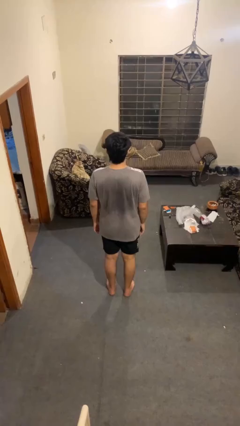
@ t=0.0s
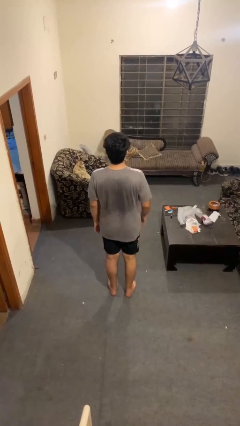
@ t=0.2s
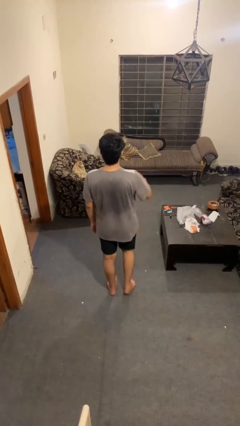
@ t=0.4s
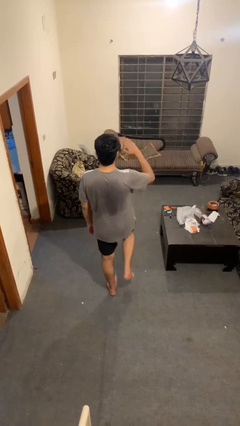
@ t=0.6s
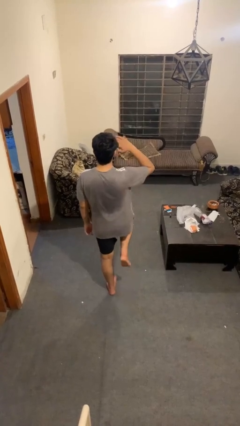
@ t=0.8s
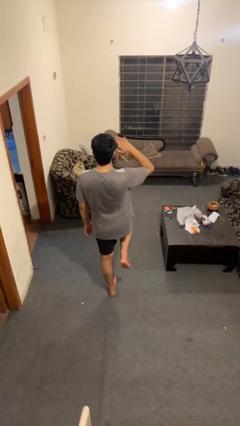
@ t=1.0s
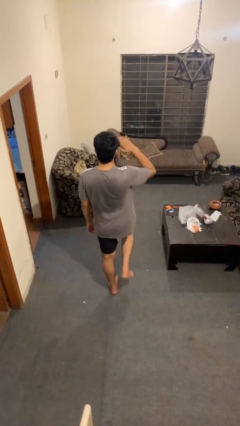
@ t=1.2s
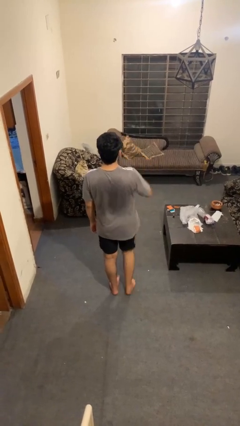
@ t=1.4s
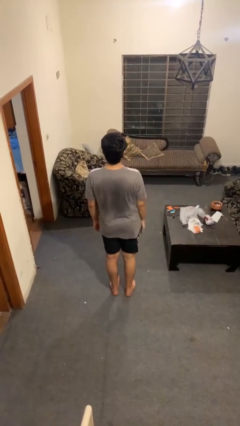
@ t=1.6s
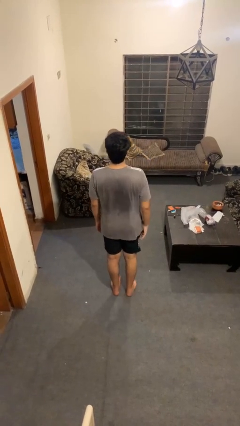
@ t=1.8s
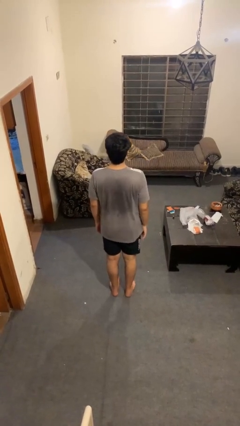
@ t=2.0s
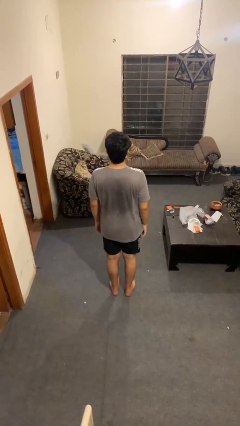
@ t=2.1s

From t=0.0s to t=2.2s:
person salutes

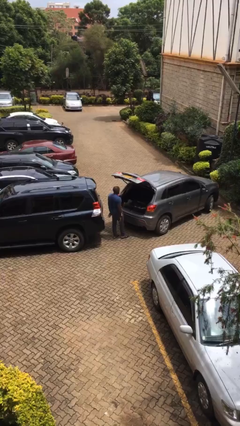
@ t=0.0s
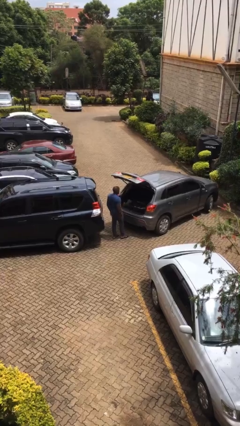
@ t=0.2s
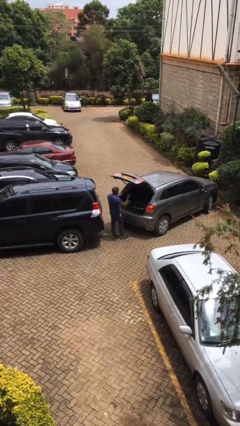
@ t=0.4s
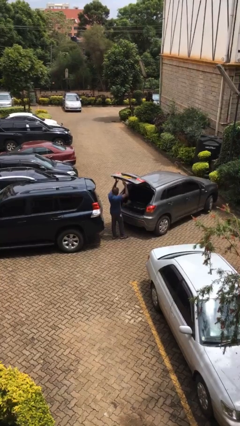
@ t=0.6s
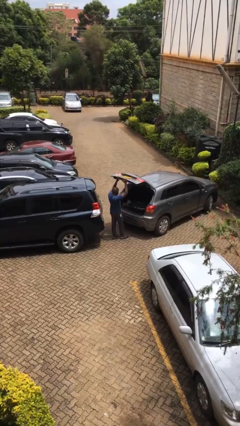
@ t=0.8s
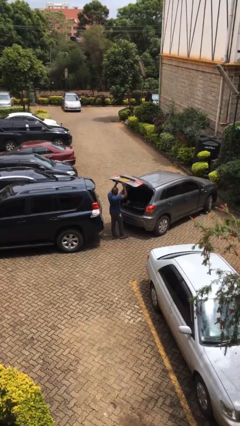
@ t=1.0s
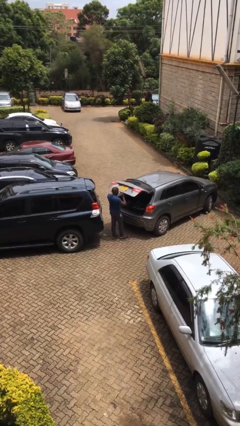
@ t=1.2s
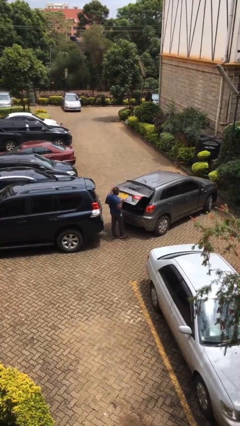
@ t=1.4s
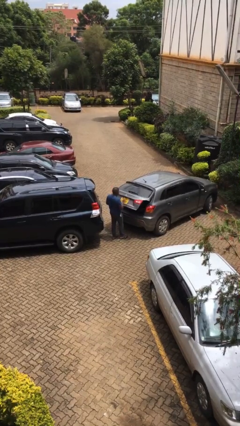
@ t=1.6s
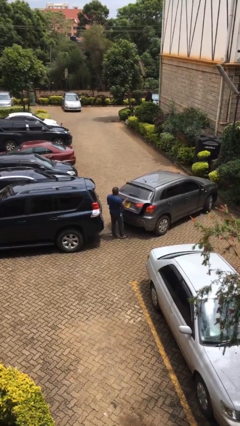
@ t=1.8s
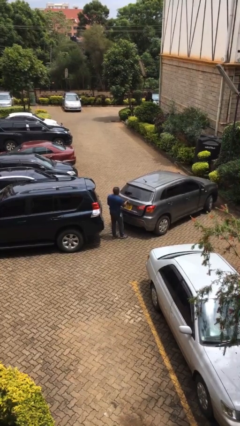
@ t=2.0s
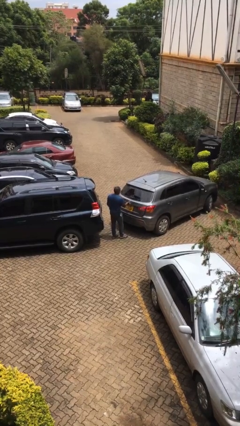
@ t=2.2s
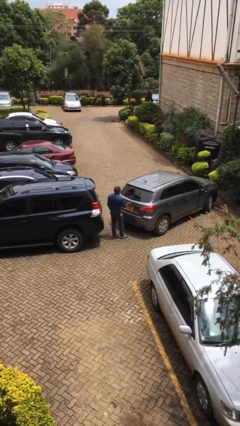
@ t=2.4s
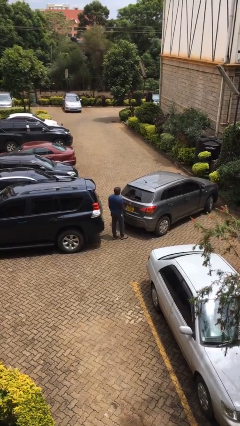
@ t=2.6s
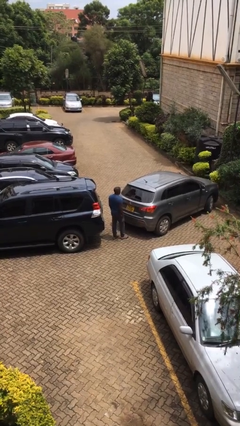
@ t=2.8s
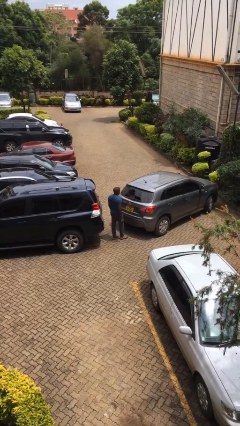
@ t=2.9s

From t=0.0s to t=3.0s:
person closes car trunk

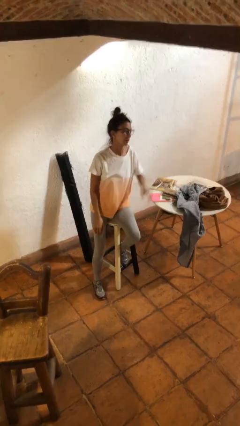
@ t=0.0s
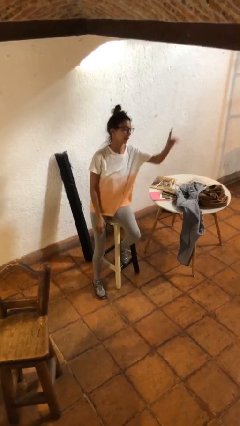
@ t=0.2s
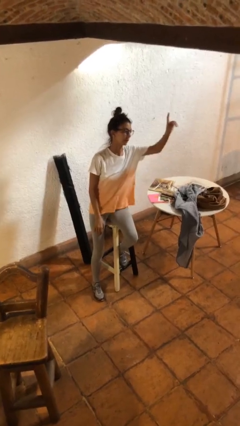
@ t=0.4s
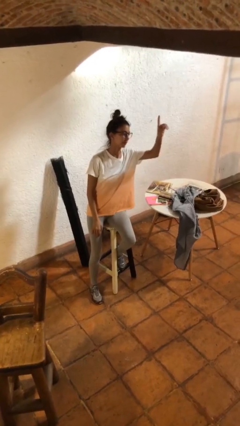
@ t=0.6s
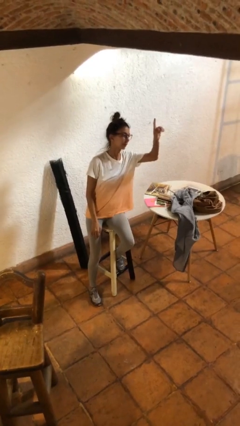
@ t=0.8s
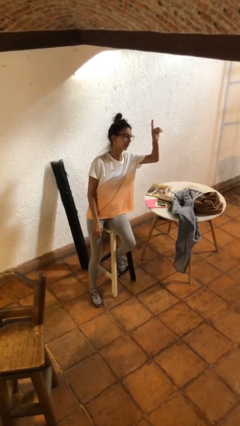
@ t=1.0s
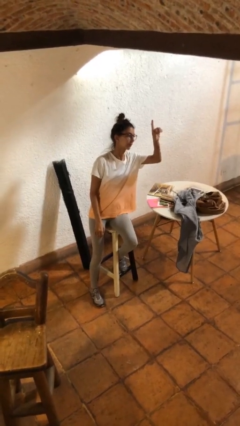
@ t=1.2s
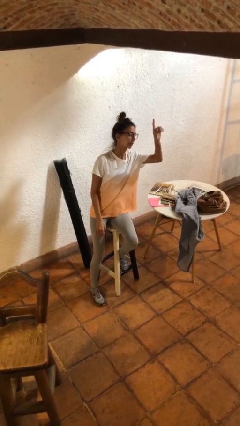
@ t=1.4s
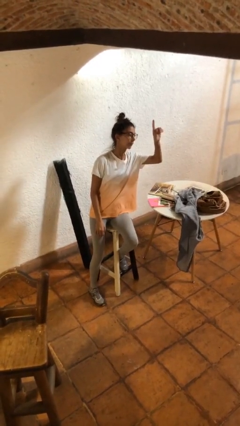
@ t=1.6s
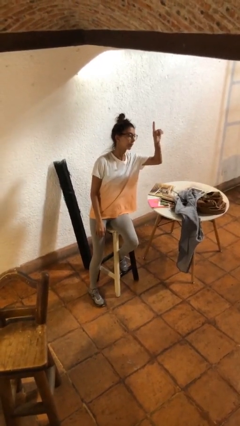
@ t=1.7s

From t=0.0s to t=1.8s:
person gestures raise hand

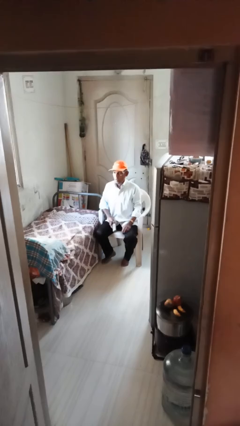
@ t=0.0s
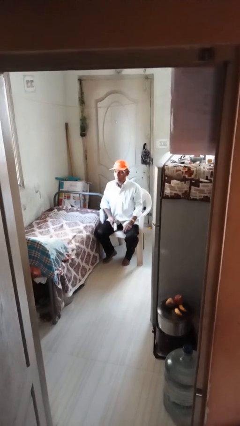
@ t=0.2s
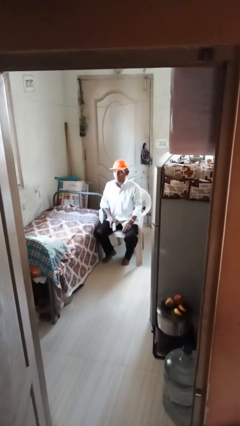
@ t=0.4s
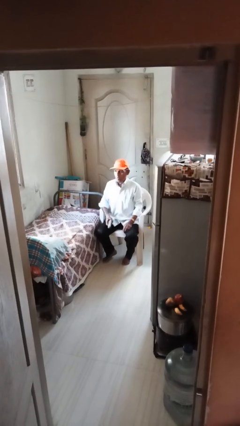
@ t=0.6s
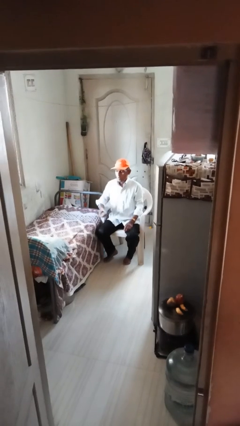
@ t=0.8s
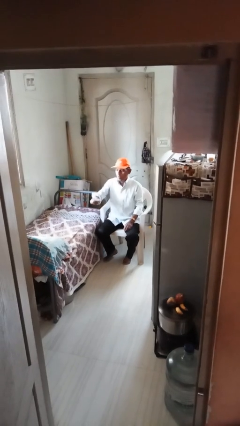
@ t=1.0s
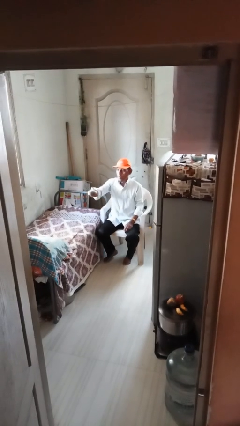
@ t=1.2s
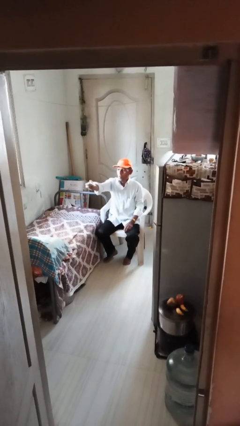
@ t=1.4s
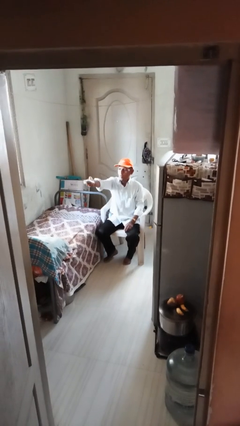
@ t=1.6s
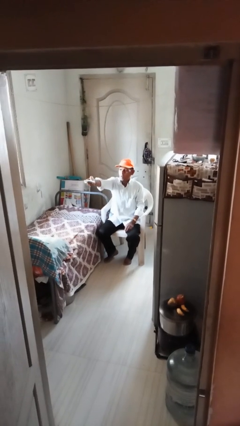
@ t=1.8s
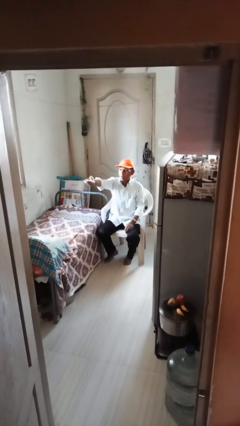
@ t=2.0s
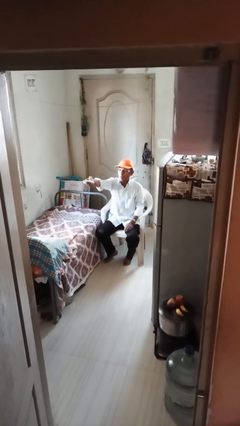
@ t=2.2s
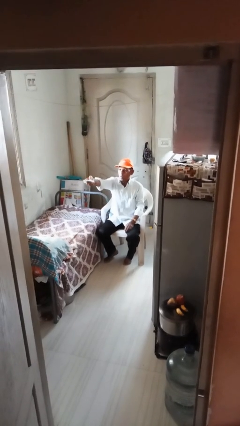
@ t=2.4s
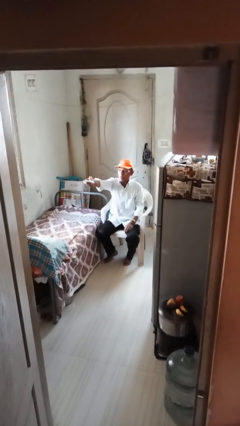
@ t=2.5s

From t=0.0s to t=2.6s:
person uses television remote

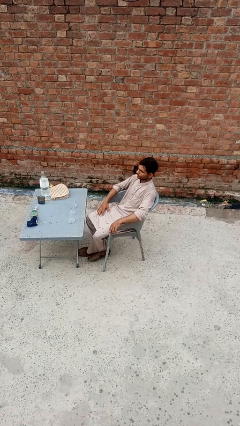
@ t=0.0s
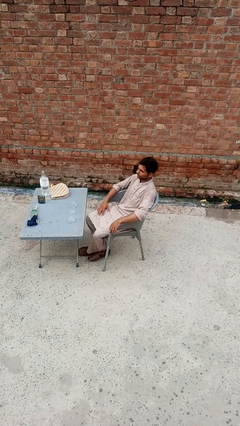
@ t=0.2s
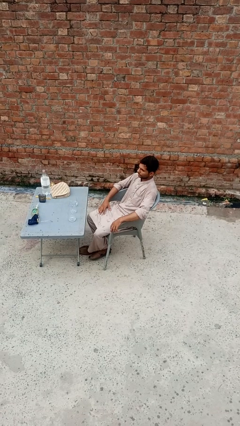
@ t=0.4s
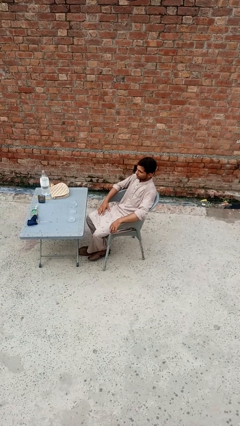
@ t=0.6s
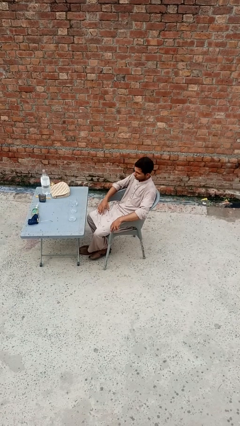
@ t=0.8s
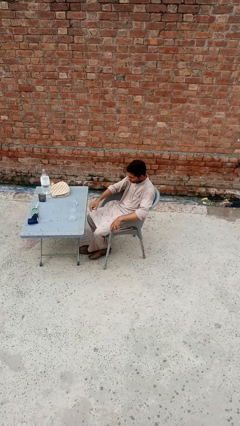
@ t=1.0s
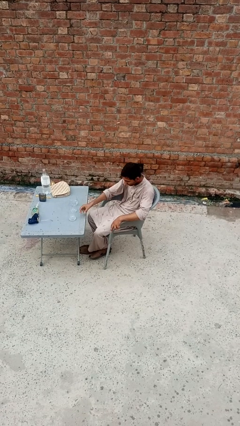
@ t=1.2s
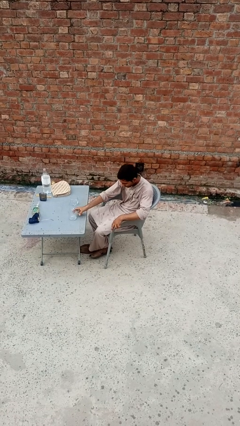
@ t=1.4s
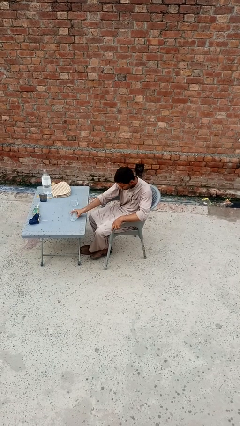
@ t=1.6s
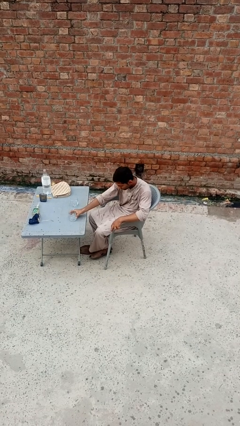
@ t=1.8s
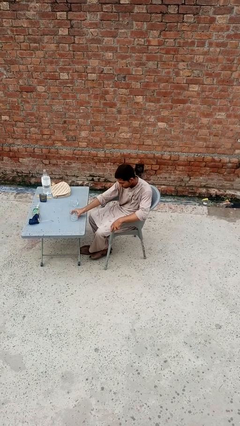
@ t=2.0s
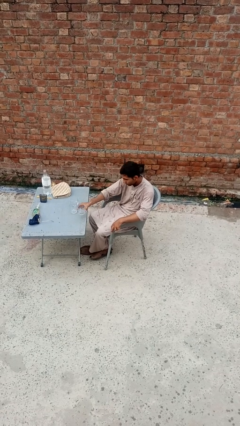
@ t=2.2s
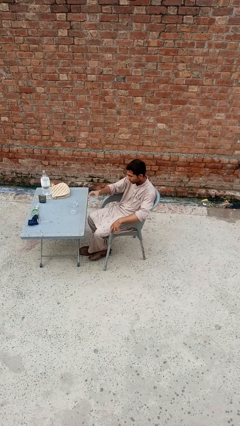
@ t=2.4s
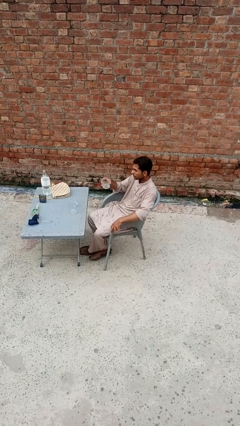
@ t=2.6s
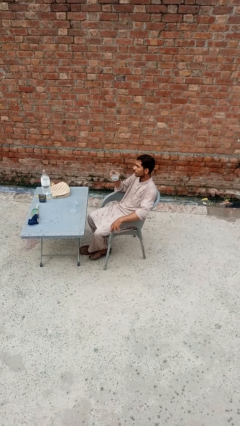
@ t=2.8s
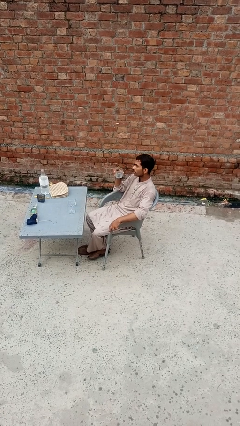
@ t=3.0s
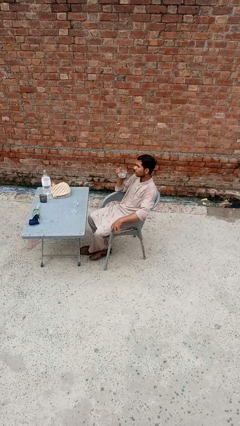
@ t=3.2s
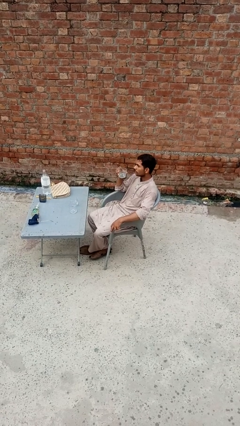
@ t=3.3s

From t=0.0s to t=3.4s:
person picks up object from table

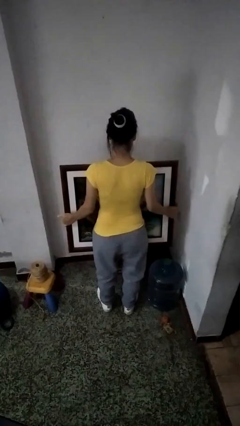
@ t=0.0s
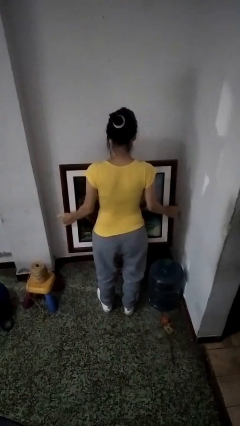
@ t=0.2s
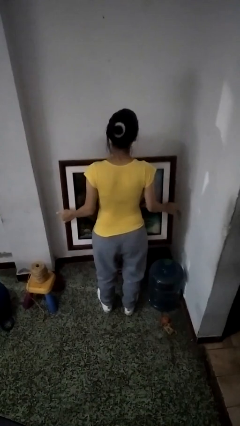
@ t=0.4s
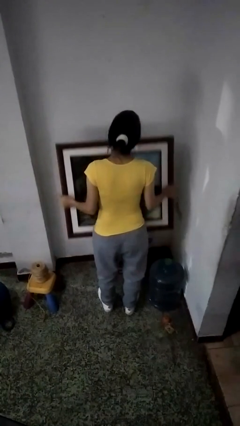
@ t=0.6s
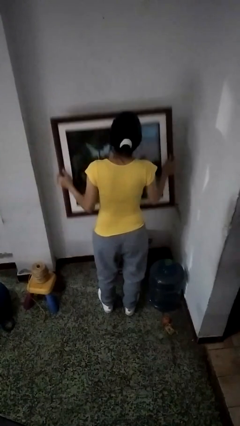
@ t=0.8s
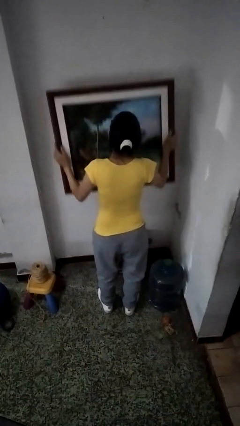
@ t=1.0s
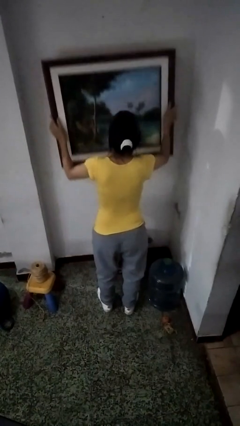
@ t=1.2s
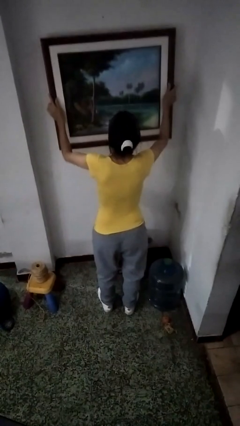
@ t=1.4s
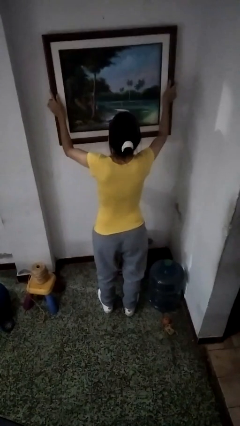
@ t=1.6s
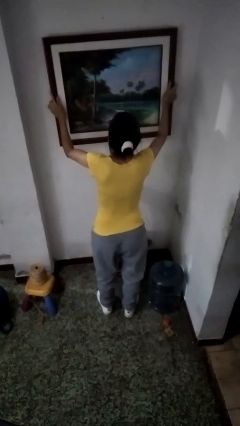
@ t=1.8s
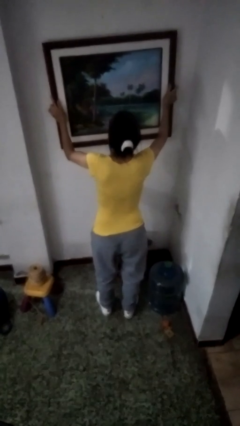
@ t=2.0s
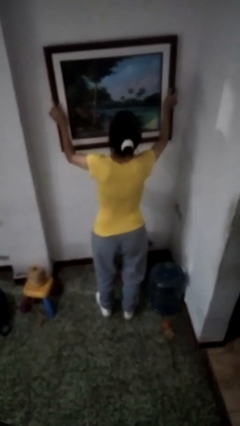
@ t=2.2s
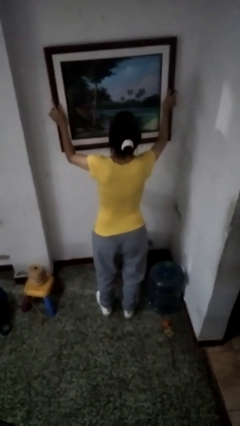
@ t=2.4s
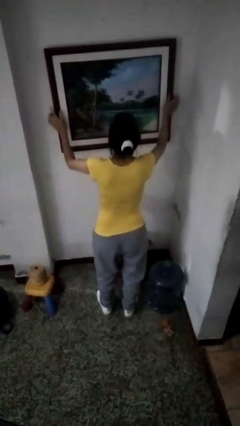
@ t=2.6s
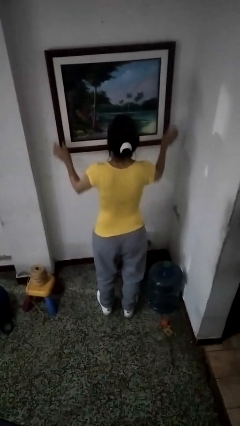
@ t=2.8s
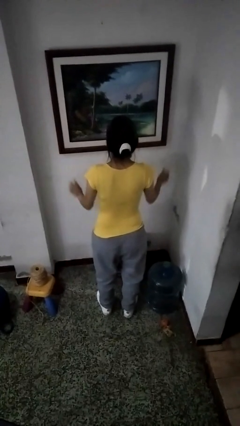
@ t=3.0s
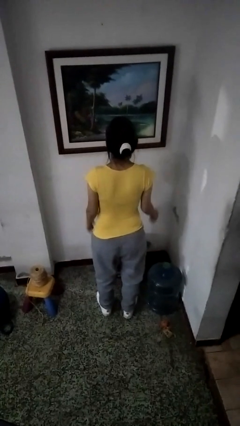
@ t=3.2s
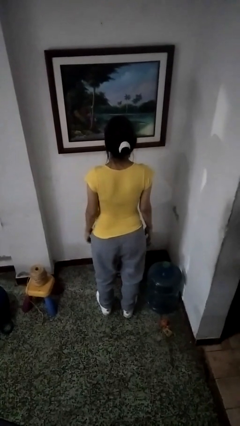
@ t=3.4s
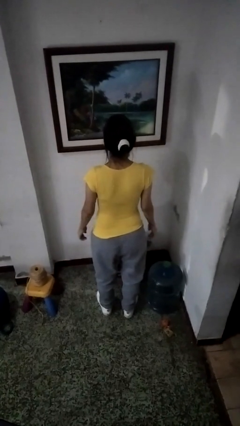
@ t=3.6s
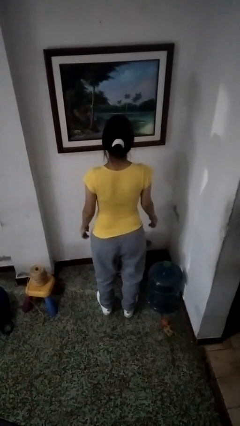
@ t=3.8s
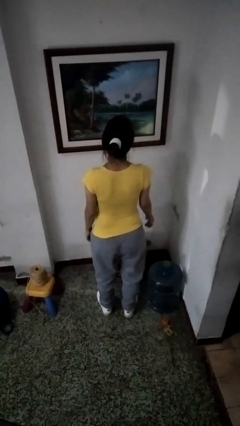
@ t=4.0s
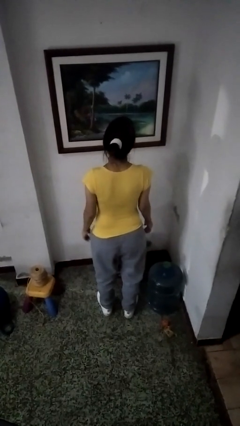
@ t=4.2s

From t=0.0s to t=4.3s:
person puts up picture frame

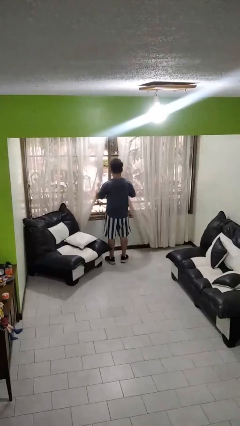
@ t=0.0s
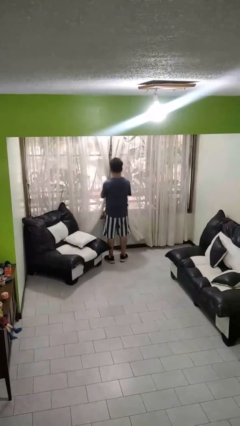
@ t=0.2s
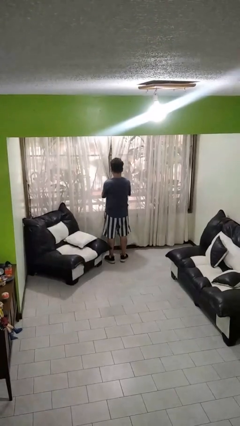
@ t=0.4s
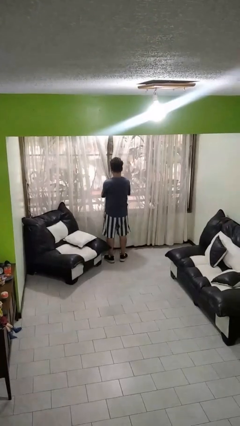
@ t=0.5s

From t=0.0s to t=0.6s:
person closes curtains
